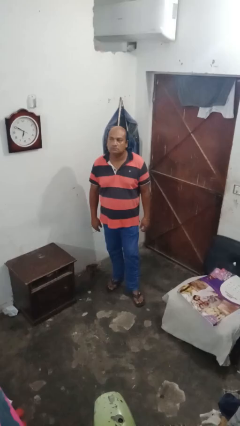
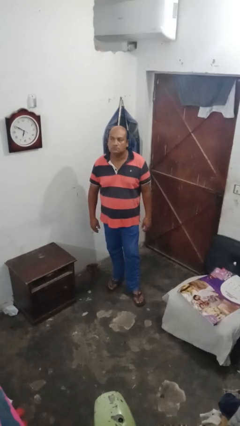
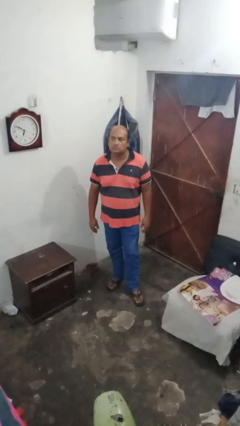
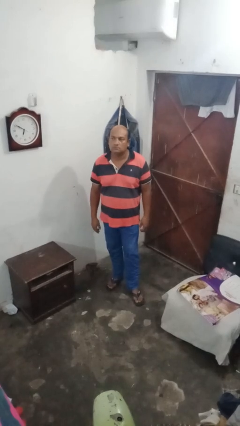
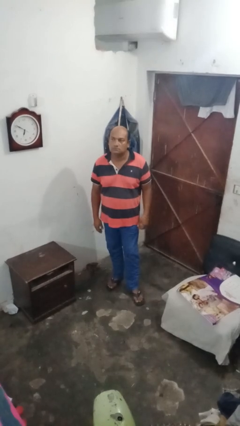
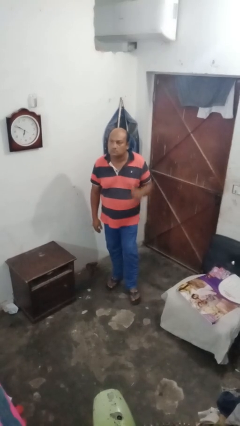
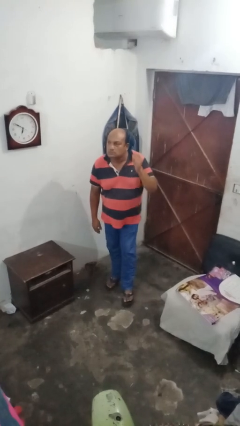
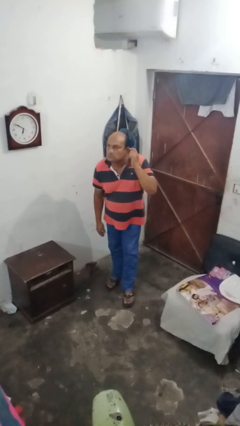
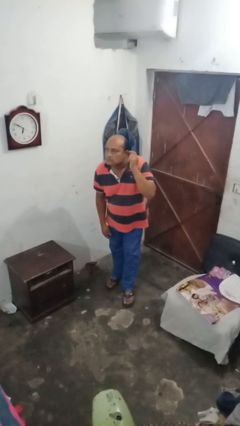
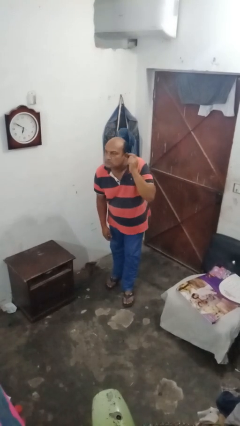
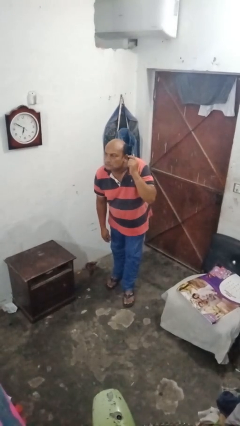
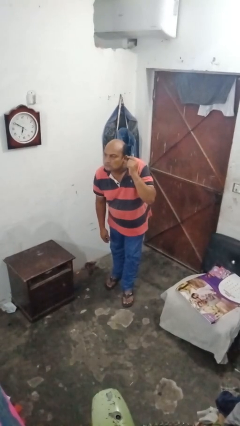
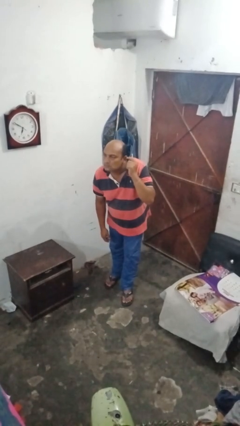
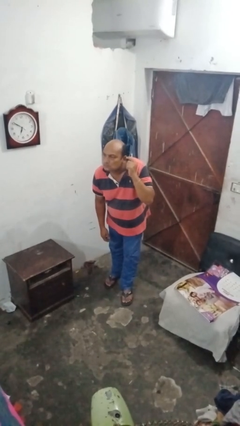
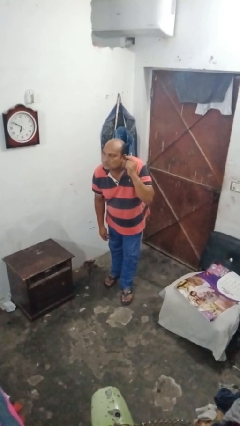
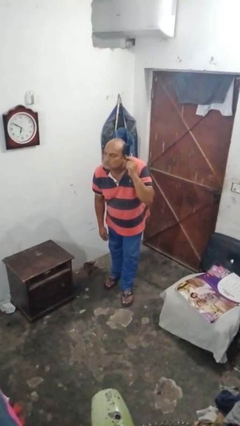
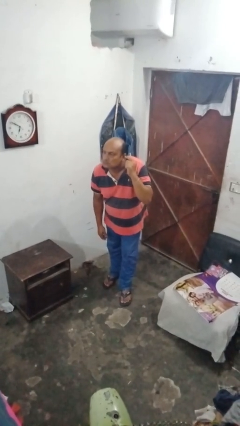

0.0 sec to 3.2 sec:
person gestures be quiet

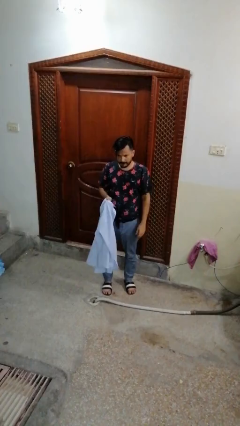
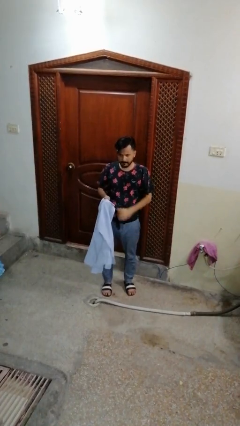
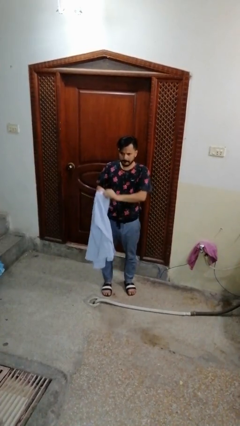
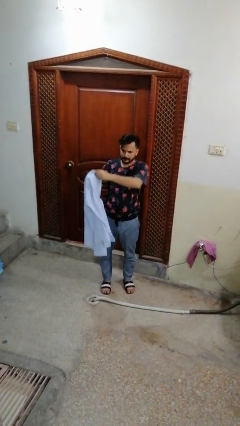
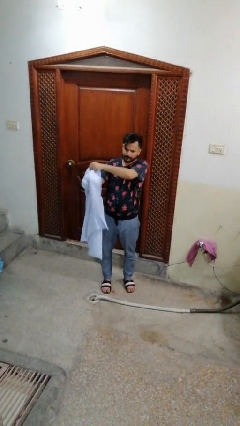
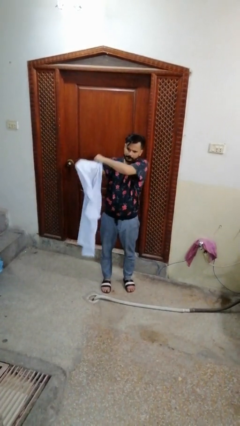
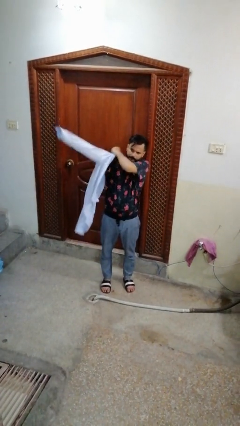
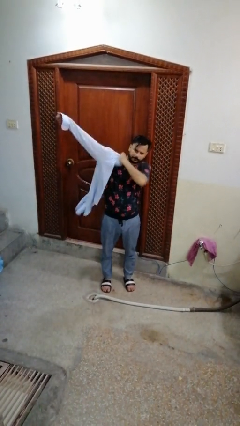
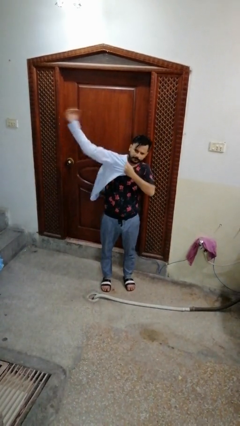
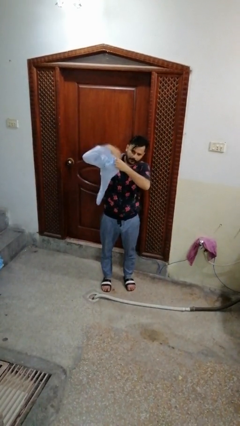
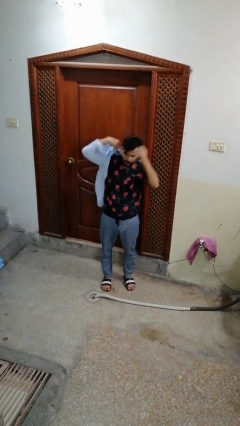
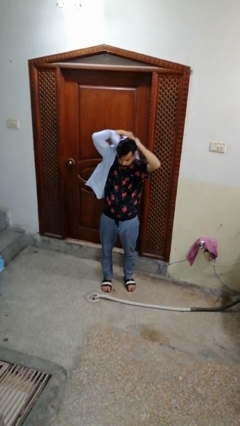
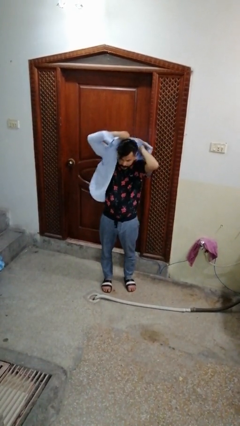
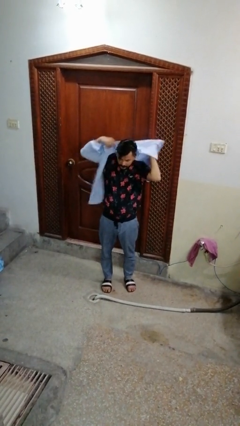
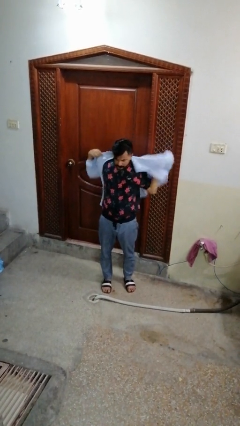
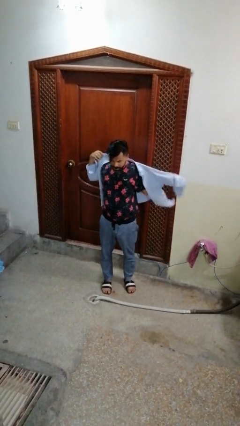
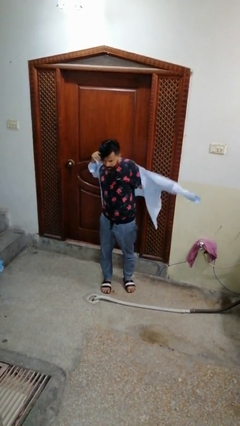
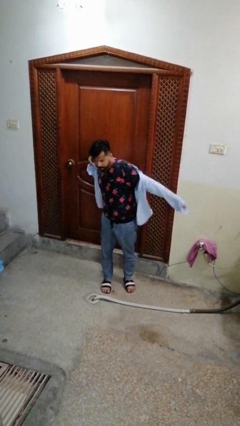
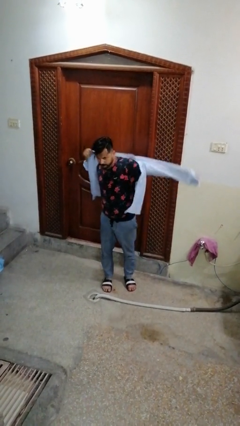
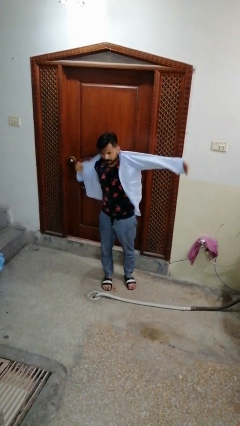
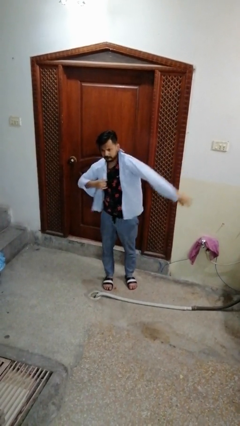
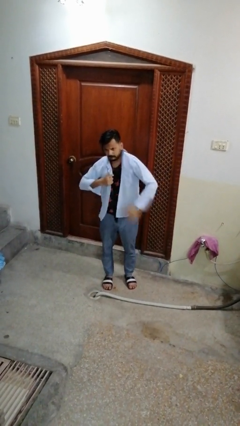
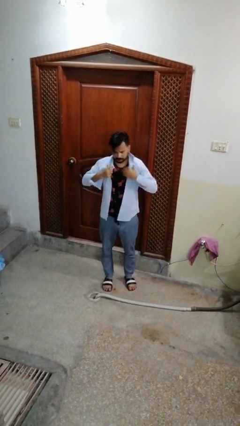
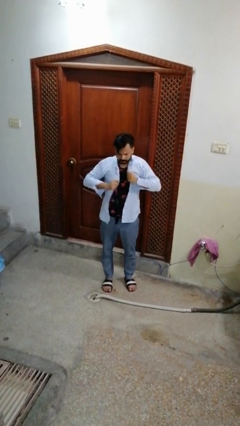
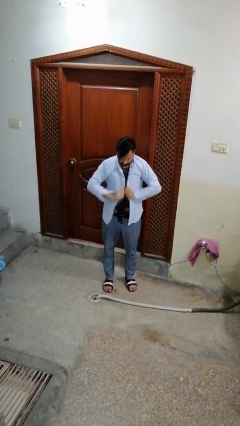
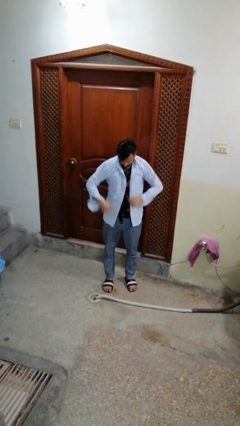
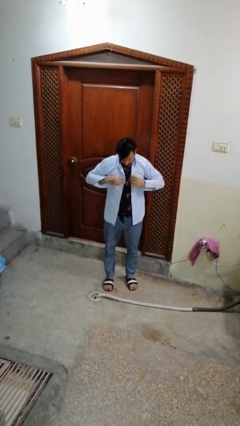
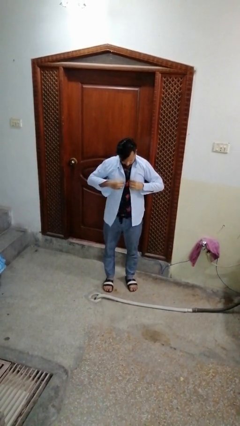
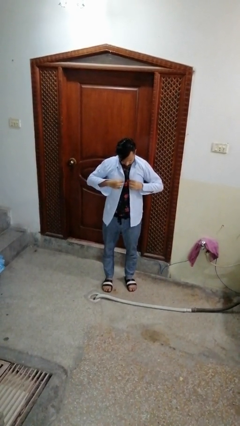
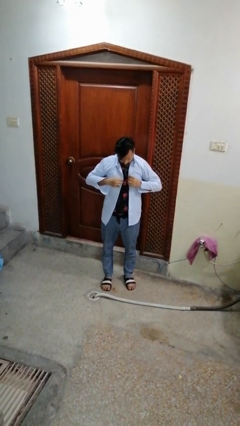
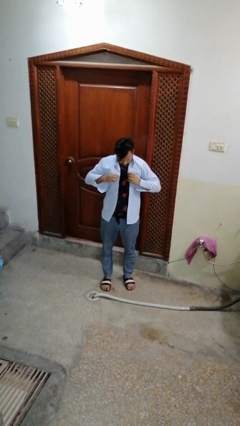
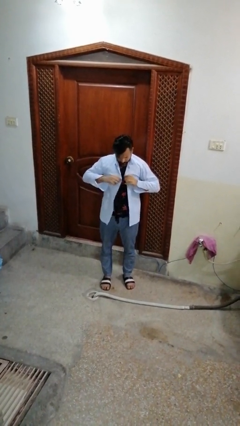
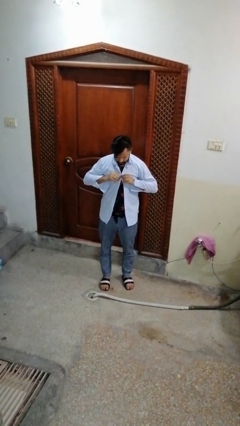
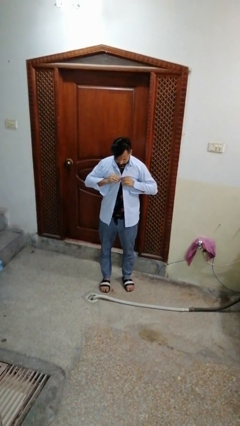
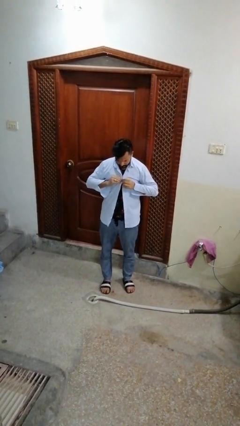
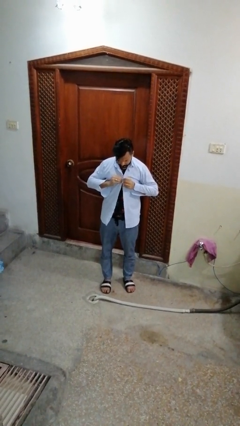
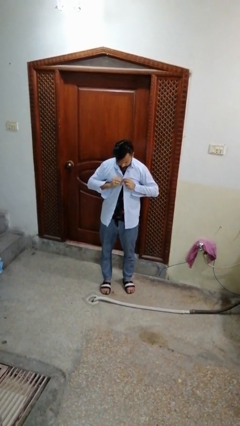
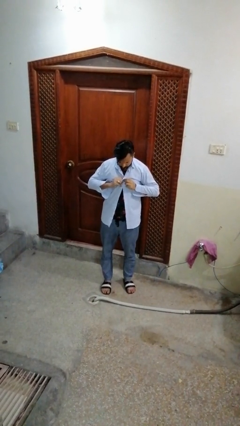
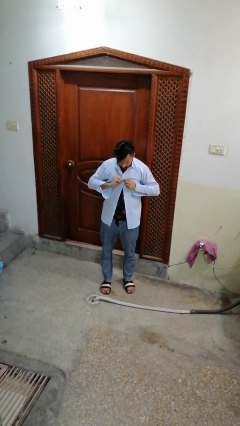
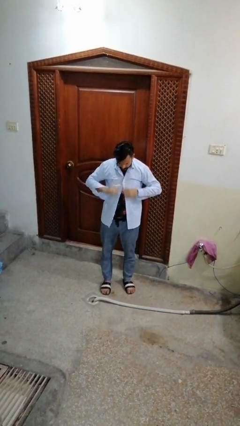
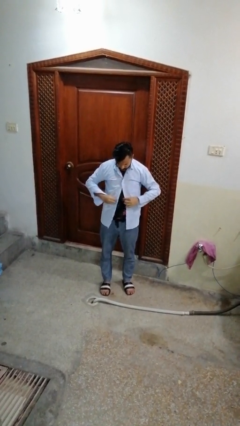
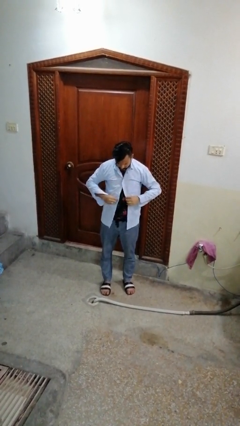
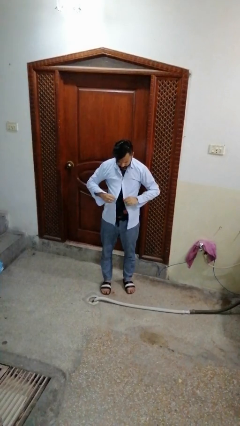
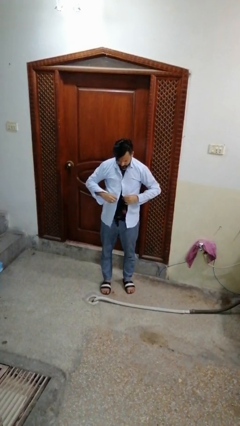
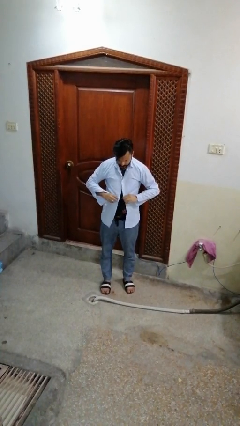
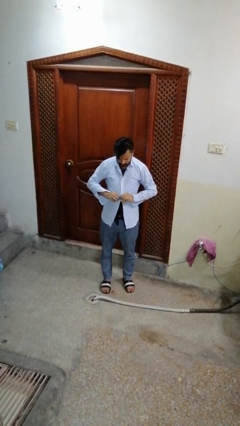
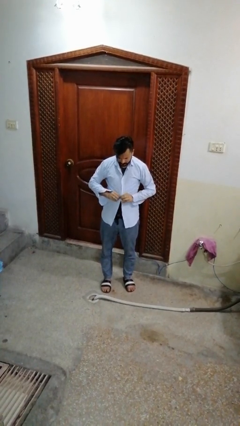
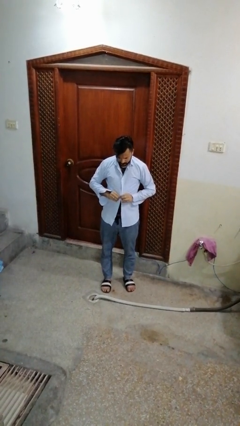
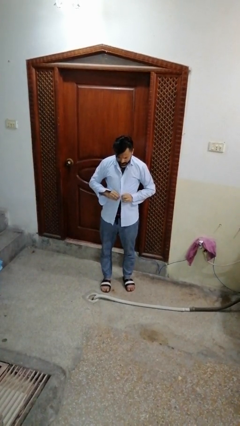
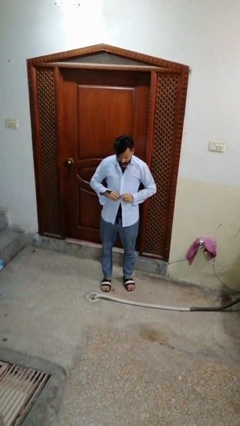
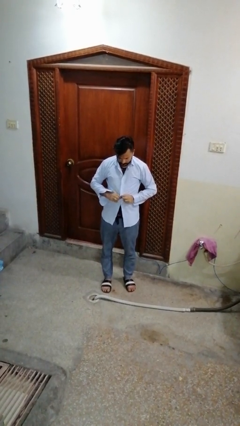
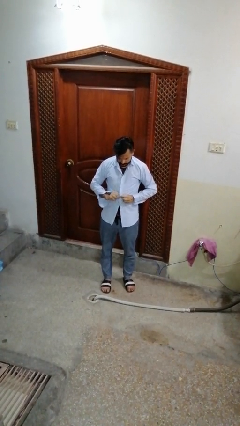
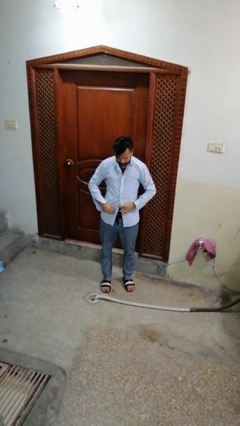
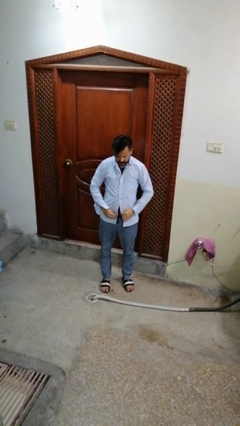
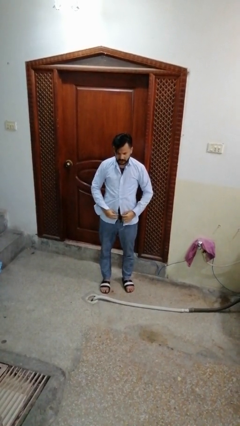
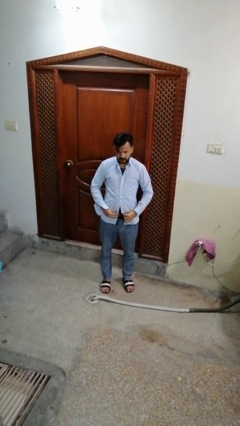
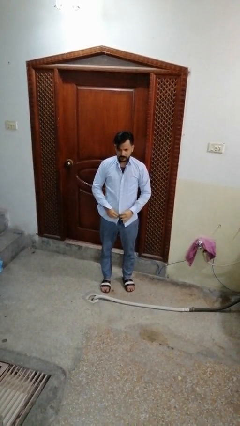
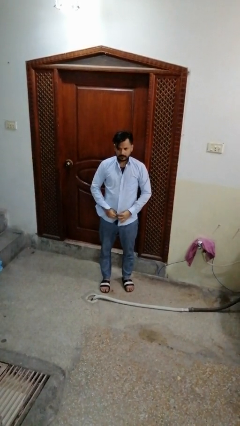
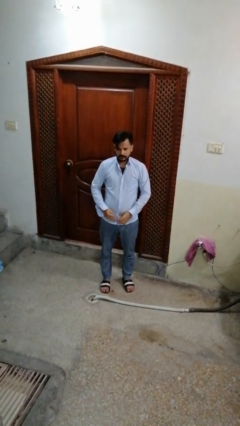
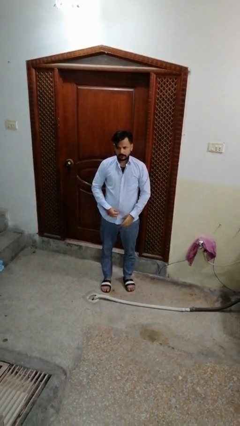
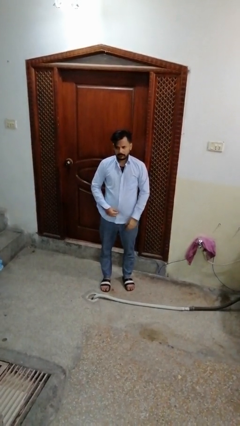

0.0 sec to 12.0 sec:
person puts on shirt

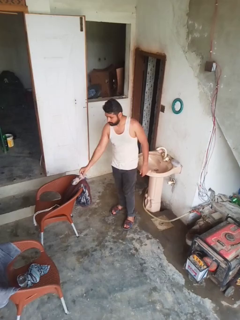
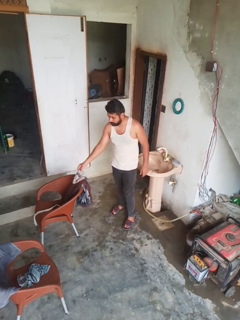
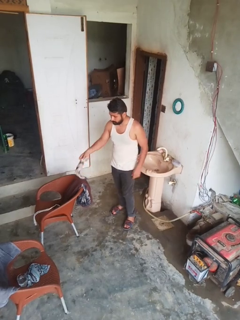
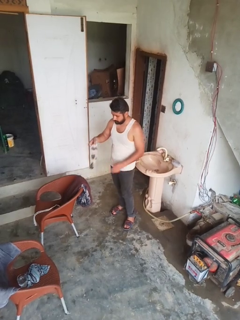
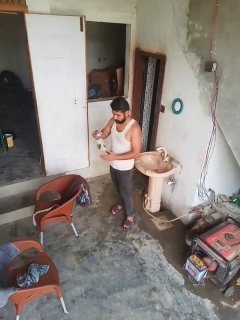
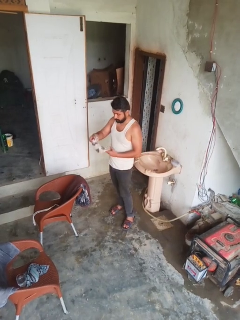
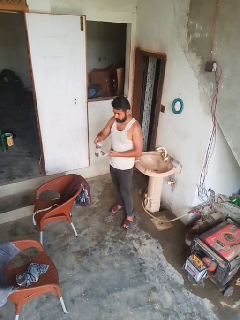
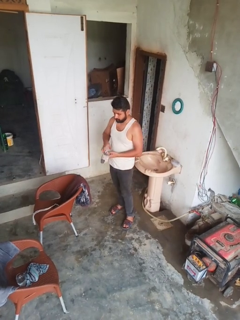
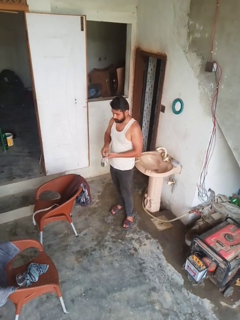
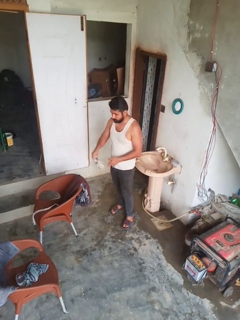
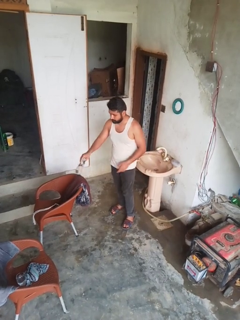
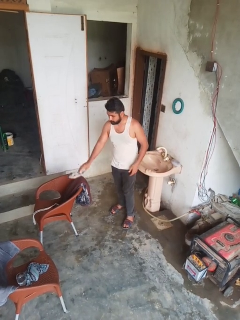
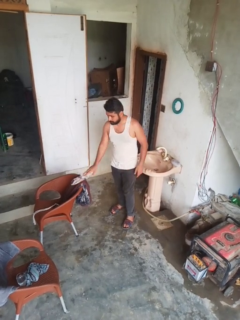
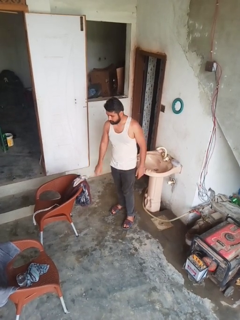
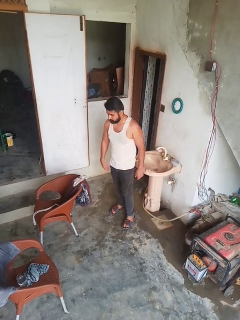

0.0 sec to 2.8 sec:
person folds socks

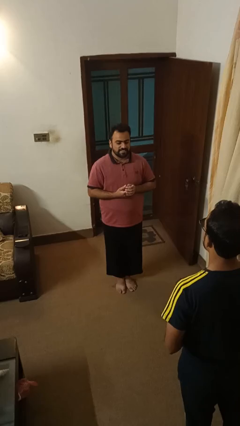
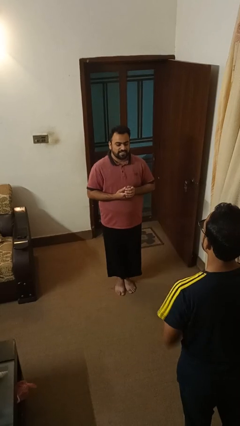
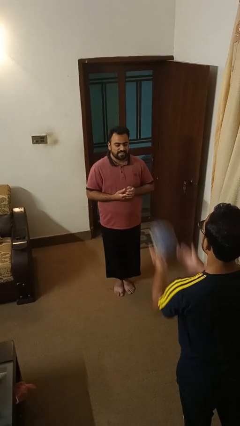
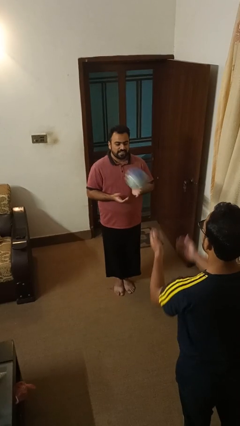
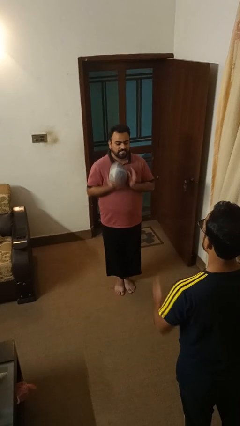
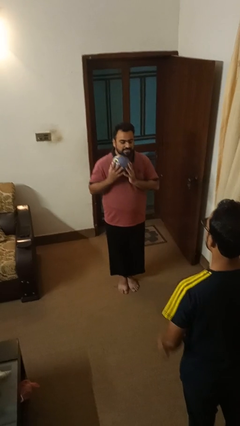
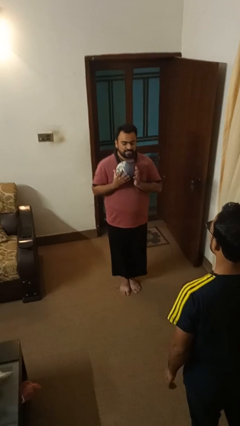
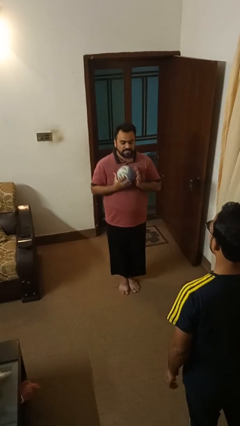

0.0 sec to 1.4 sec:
person catches object from person
